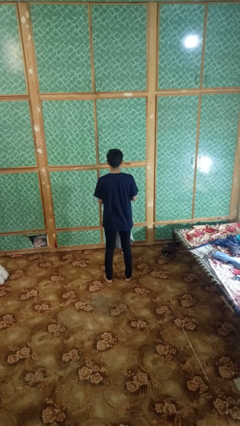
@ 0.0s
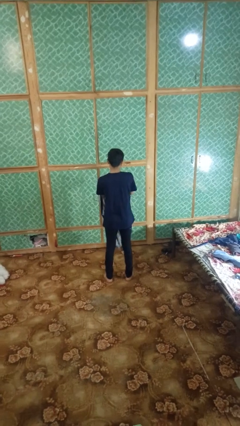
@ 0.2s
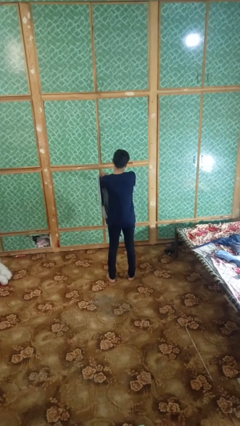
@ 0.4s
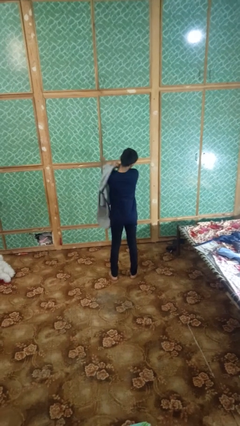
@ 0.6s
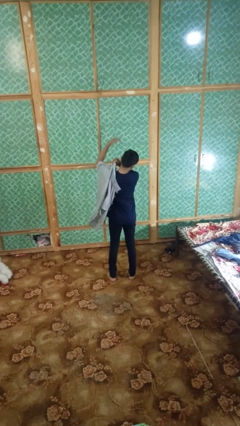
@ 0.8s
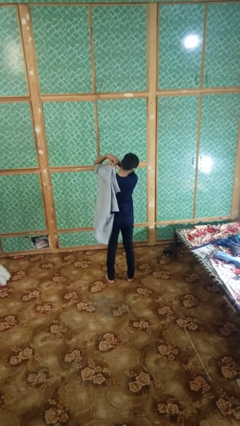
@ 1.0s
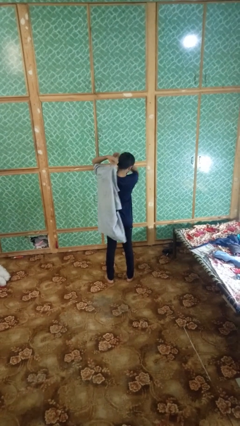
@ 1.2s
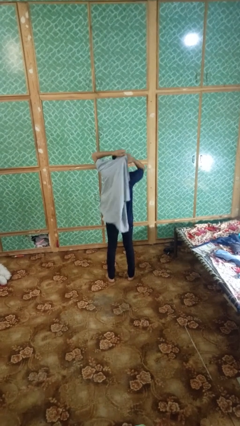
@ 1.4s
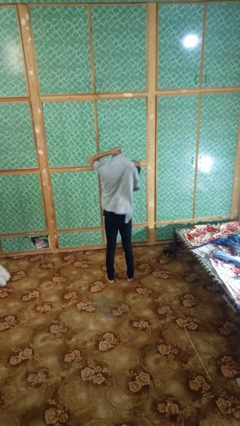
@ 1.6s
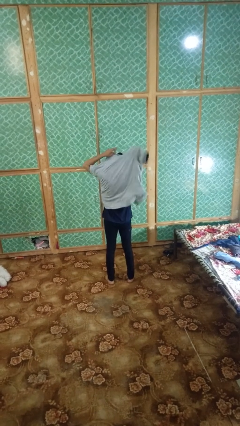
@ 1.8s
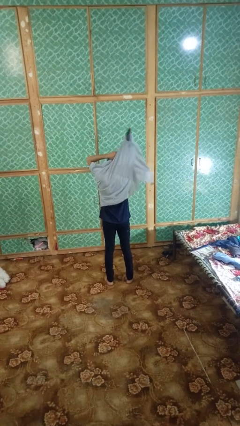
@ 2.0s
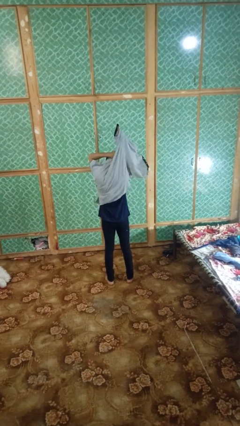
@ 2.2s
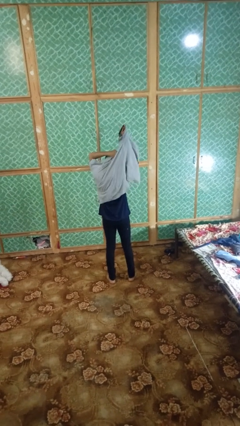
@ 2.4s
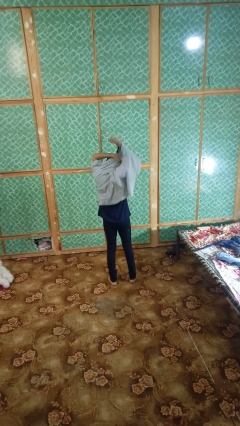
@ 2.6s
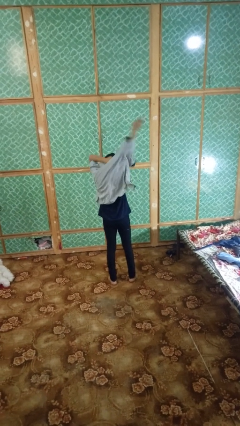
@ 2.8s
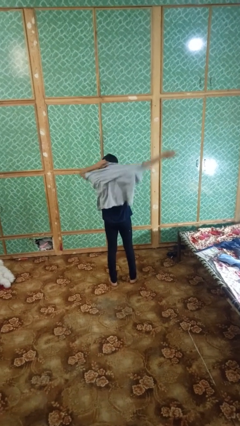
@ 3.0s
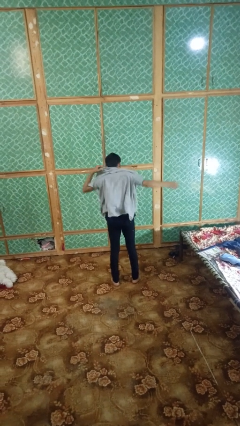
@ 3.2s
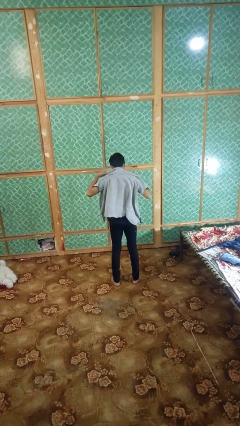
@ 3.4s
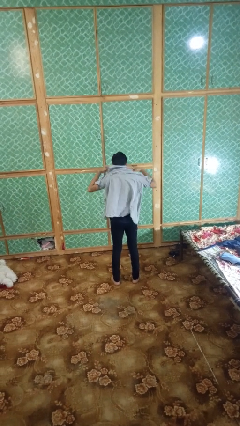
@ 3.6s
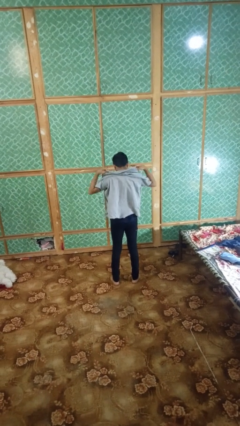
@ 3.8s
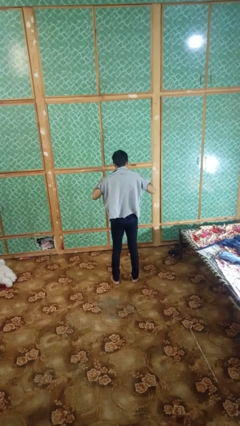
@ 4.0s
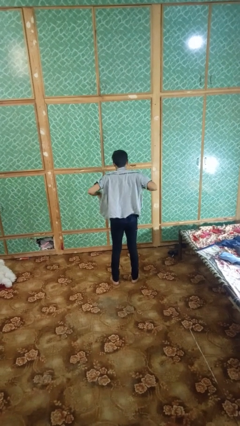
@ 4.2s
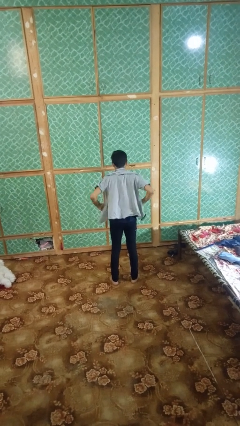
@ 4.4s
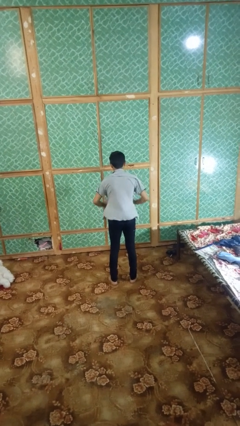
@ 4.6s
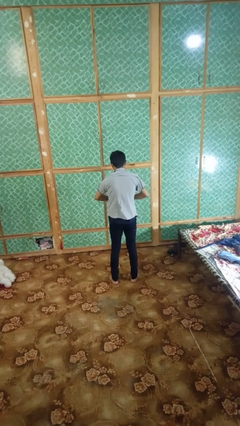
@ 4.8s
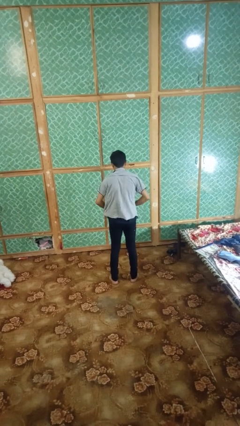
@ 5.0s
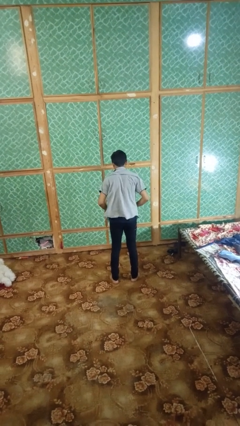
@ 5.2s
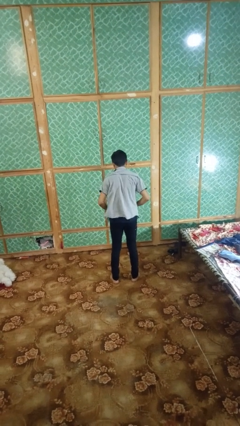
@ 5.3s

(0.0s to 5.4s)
person puts on shirt

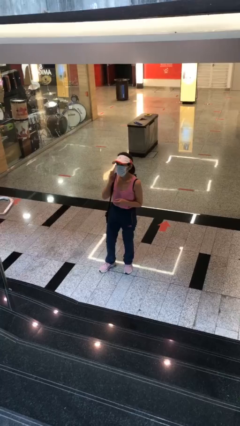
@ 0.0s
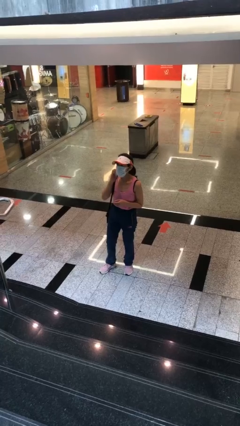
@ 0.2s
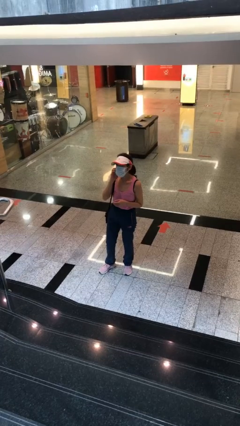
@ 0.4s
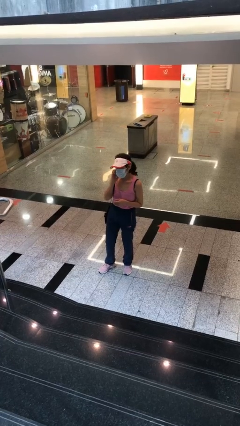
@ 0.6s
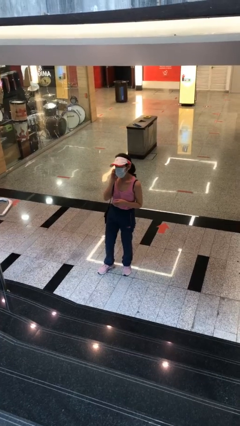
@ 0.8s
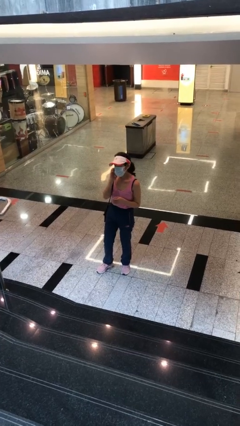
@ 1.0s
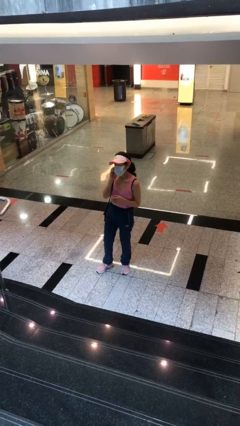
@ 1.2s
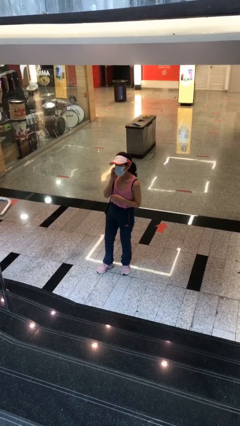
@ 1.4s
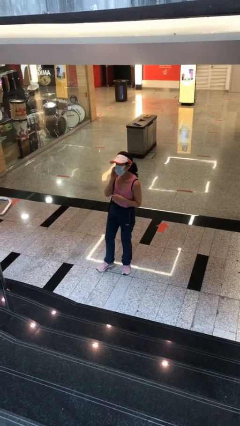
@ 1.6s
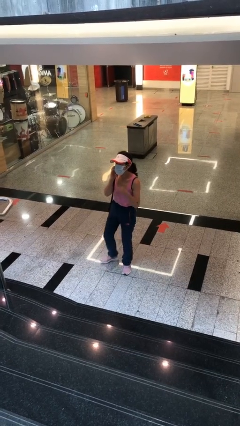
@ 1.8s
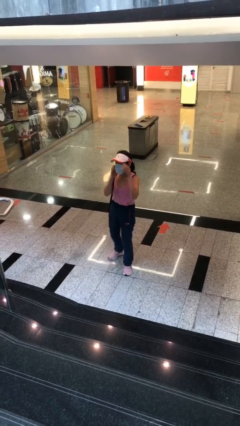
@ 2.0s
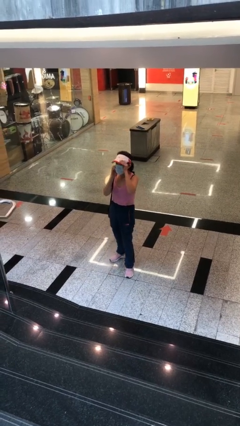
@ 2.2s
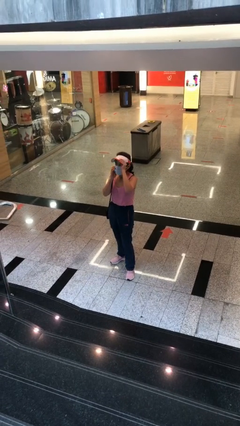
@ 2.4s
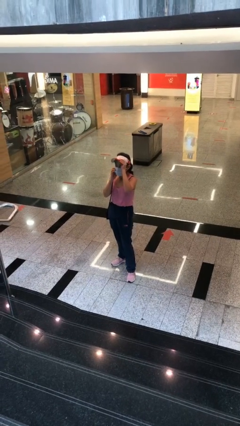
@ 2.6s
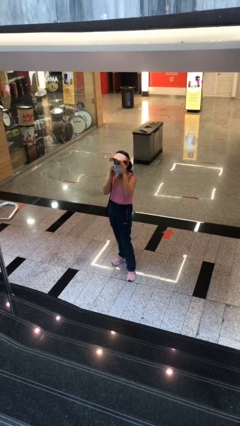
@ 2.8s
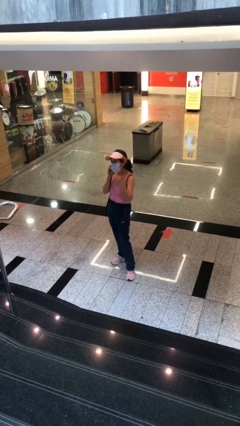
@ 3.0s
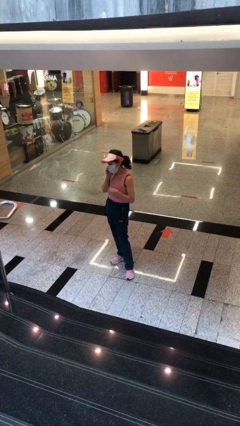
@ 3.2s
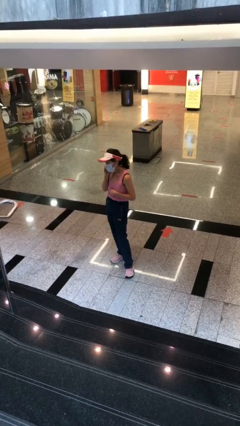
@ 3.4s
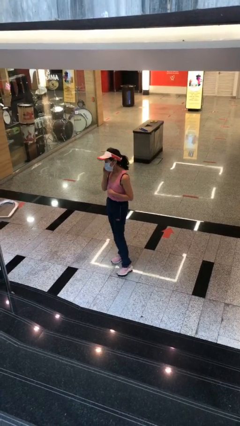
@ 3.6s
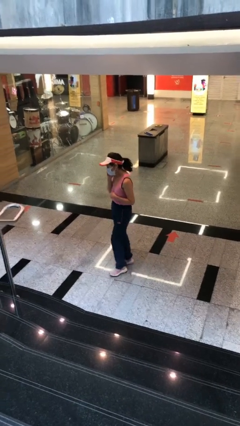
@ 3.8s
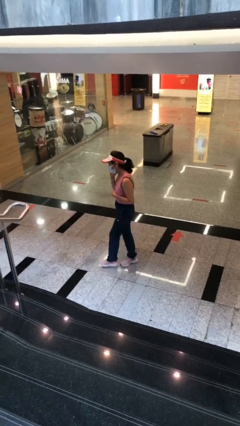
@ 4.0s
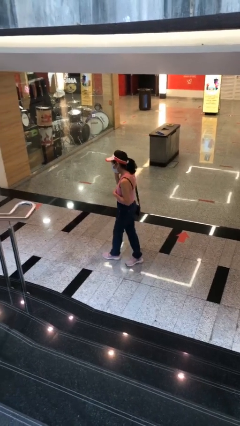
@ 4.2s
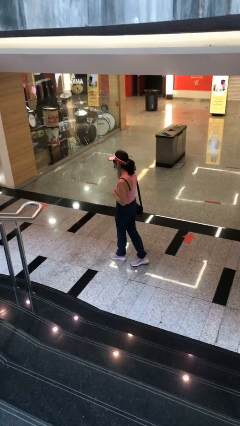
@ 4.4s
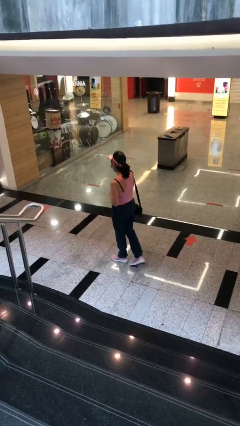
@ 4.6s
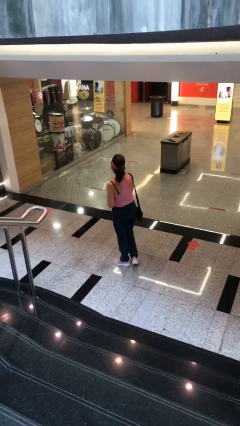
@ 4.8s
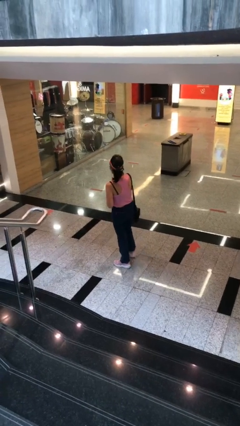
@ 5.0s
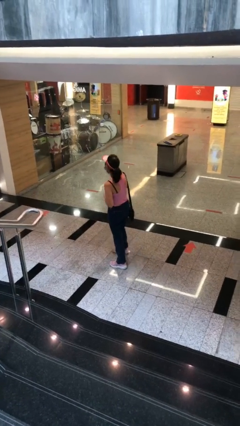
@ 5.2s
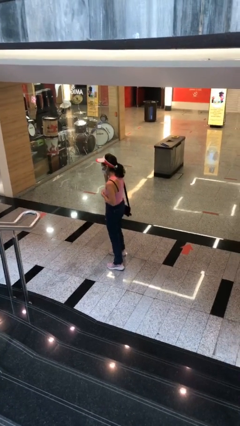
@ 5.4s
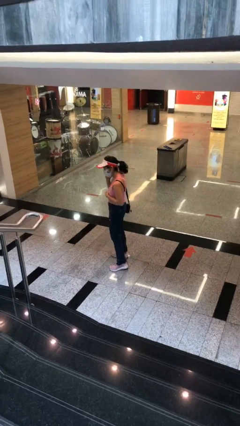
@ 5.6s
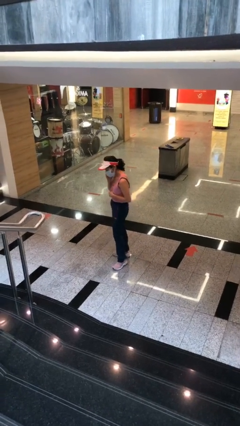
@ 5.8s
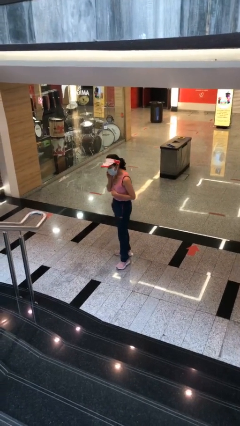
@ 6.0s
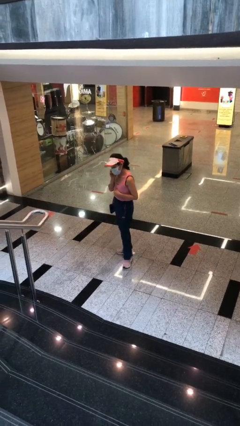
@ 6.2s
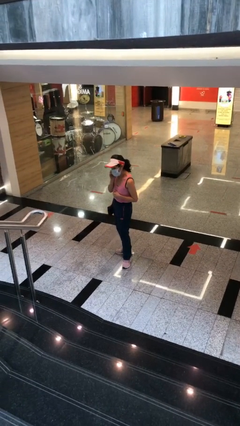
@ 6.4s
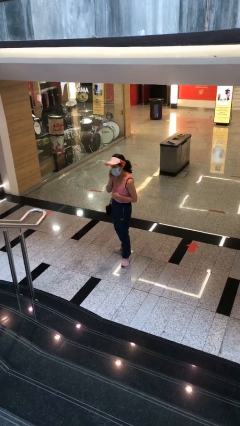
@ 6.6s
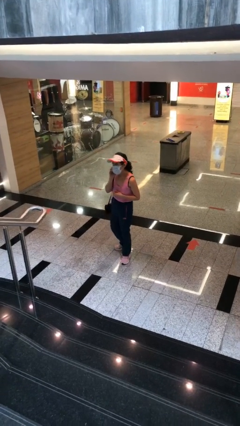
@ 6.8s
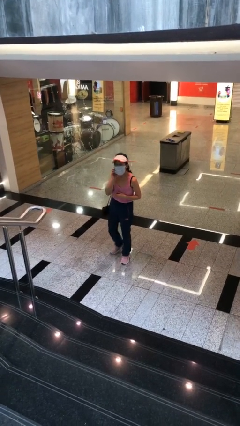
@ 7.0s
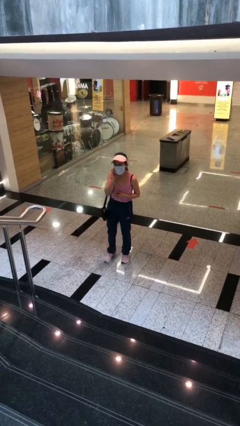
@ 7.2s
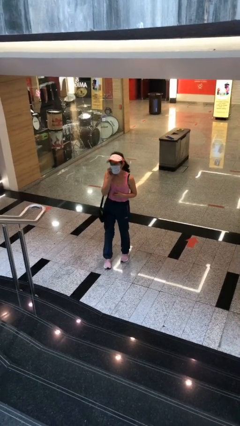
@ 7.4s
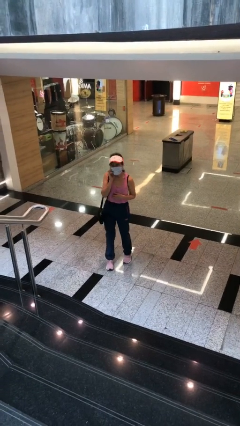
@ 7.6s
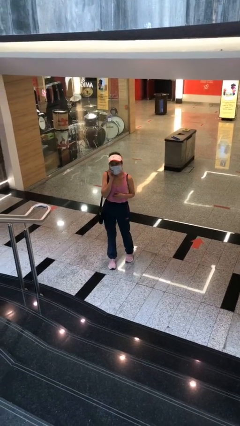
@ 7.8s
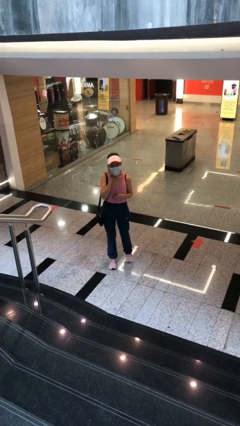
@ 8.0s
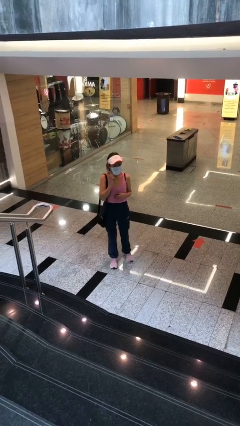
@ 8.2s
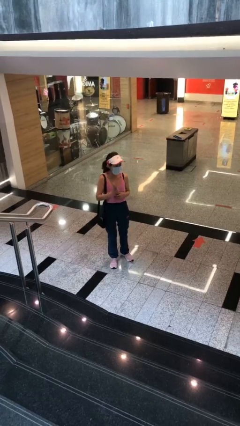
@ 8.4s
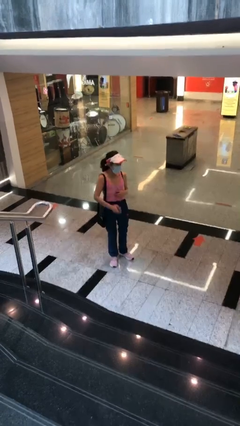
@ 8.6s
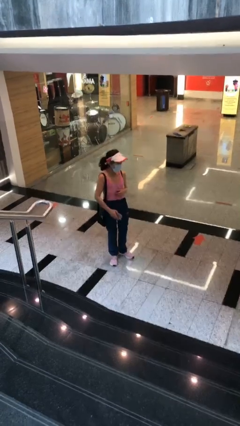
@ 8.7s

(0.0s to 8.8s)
person talks on phone

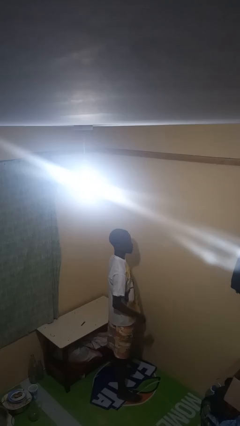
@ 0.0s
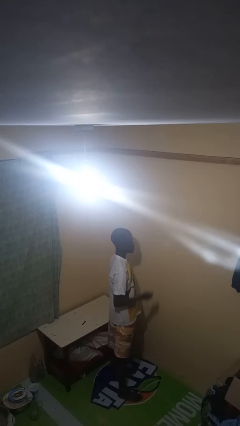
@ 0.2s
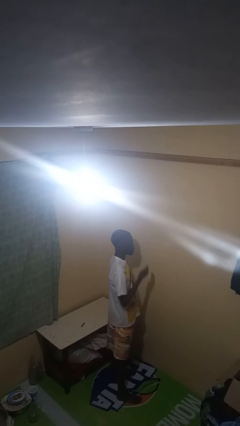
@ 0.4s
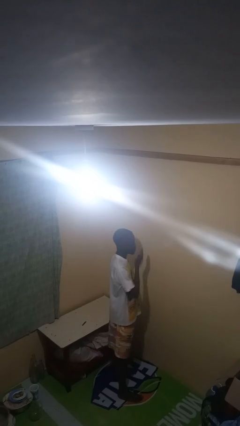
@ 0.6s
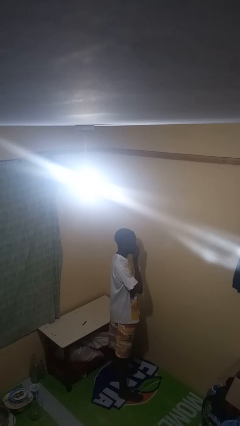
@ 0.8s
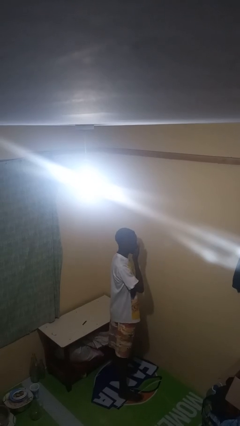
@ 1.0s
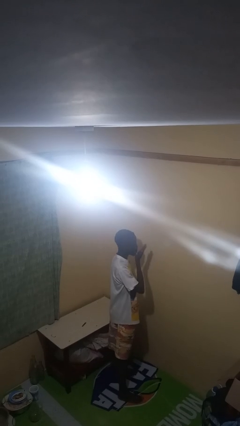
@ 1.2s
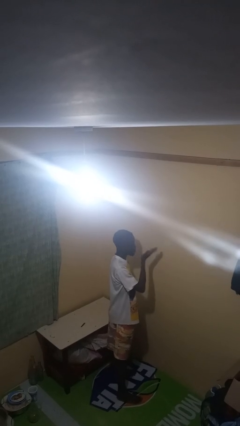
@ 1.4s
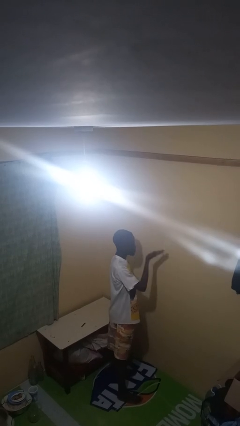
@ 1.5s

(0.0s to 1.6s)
person gestures blow kiss

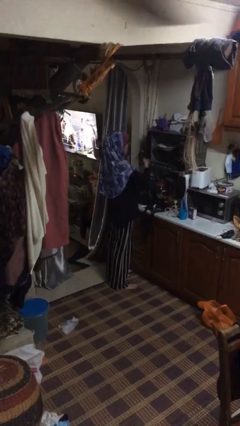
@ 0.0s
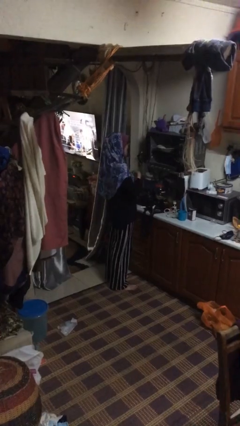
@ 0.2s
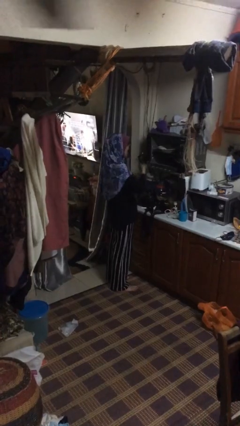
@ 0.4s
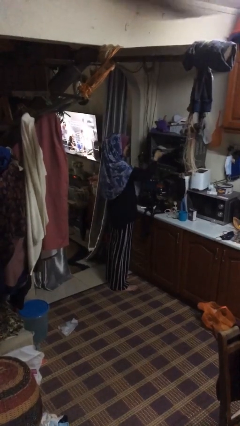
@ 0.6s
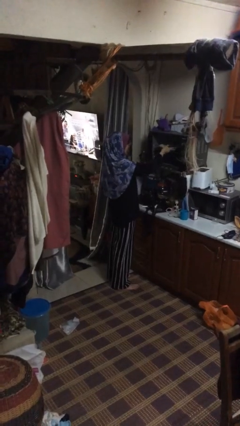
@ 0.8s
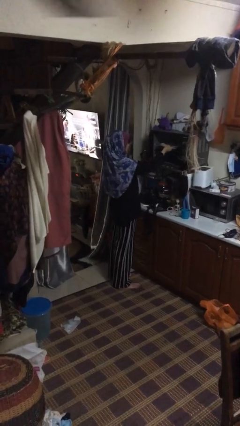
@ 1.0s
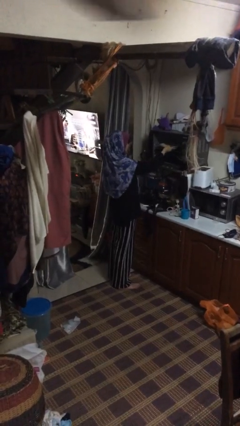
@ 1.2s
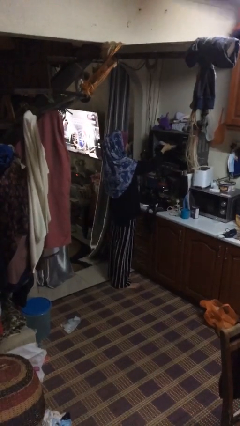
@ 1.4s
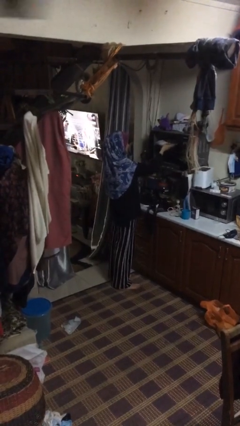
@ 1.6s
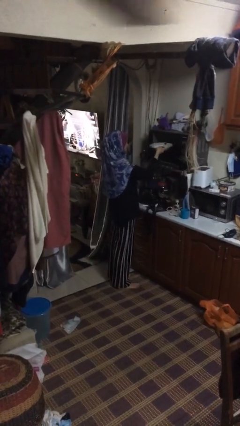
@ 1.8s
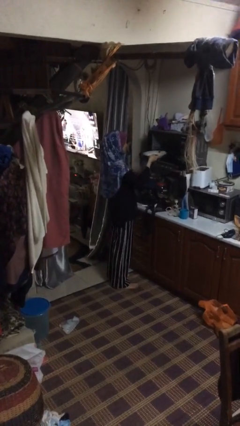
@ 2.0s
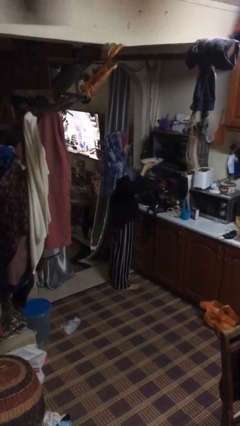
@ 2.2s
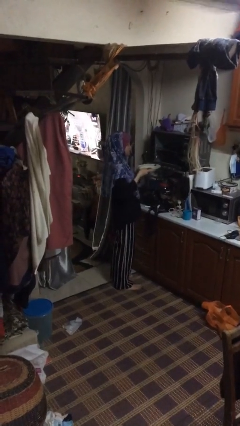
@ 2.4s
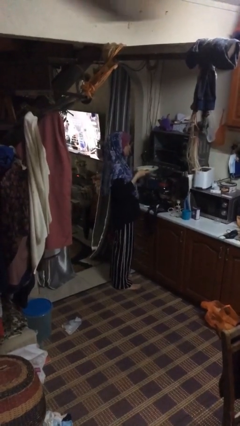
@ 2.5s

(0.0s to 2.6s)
person takes object from oven
